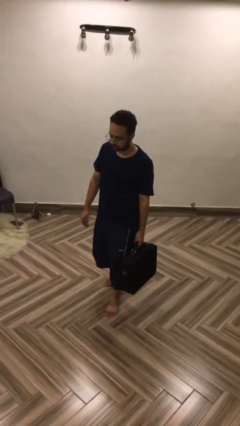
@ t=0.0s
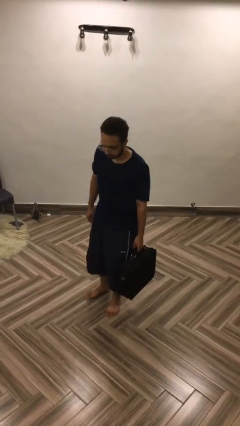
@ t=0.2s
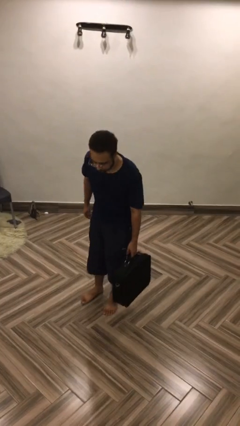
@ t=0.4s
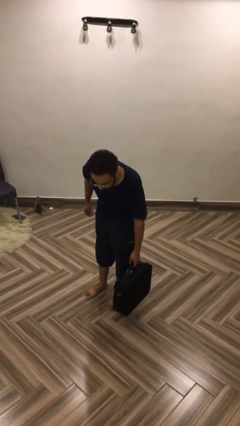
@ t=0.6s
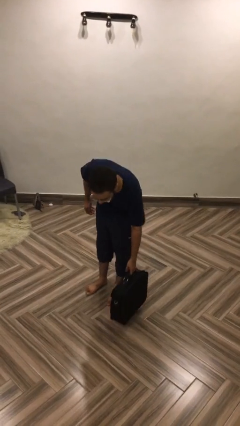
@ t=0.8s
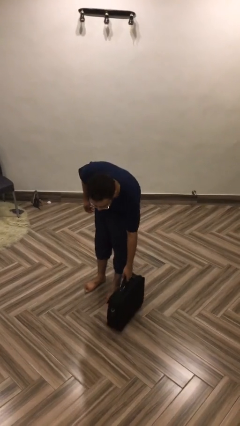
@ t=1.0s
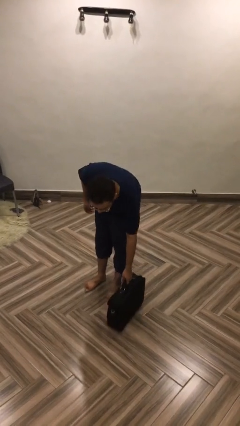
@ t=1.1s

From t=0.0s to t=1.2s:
person puts down object on floor

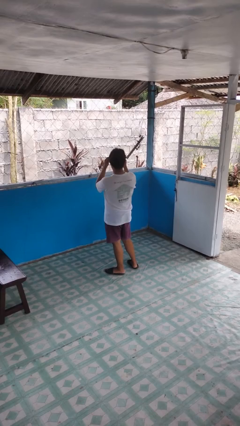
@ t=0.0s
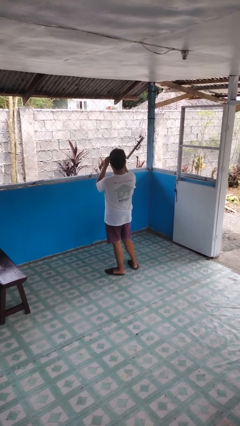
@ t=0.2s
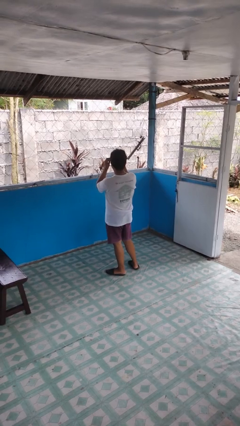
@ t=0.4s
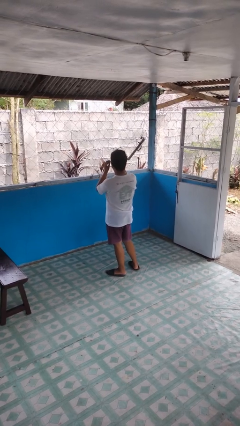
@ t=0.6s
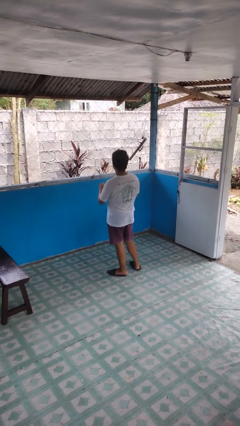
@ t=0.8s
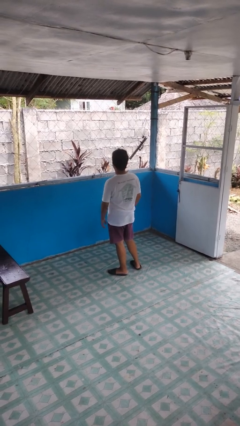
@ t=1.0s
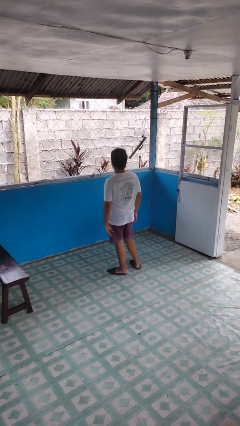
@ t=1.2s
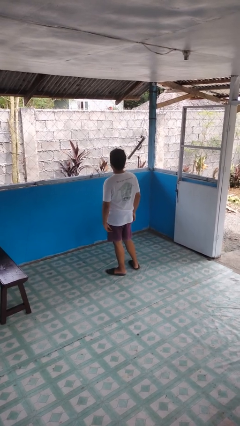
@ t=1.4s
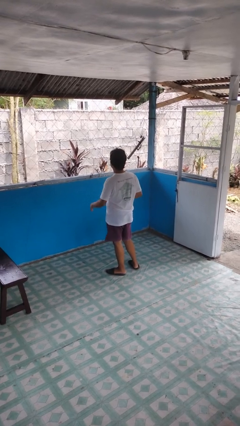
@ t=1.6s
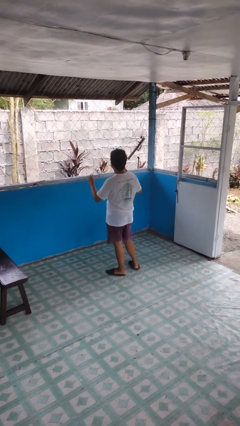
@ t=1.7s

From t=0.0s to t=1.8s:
person puts on sunglasses

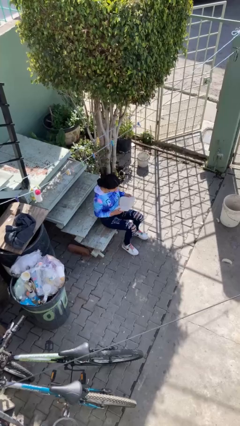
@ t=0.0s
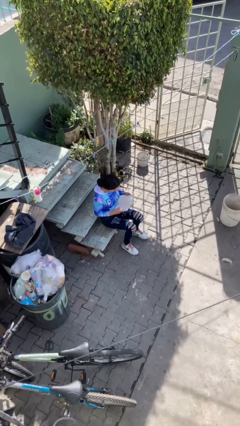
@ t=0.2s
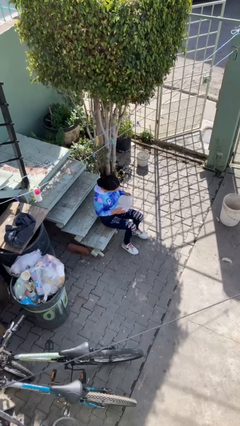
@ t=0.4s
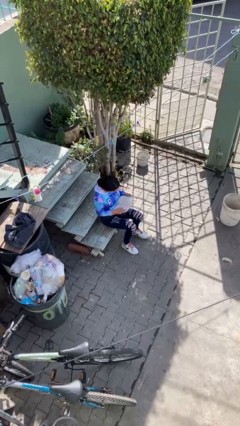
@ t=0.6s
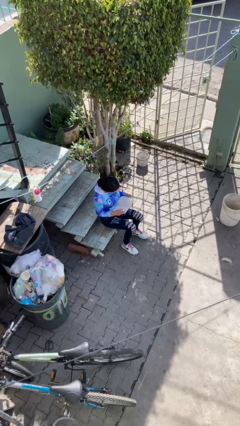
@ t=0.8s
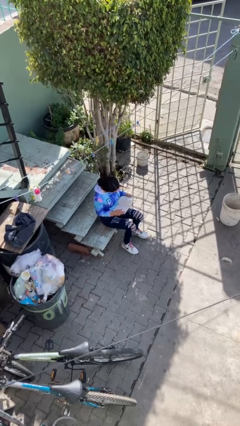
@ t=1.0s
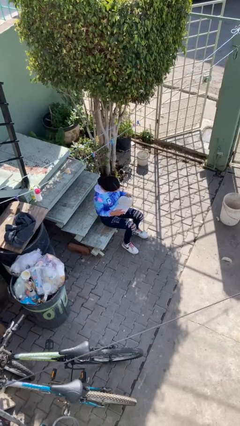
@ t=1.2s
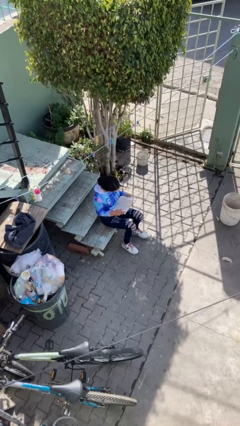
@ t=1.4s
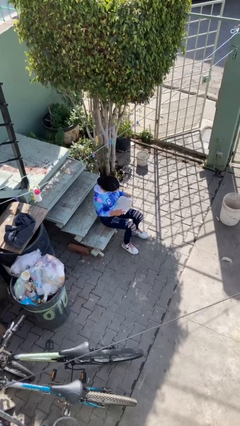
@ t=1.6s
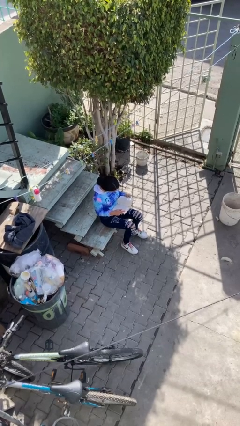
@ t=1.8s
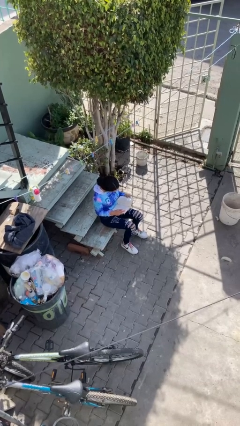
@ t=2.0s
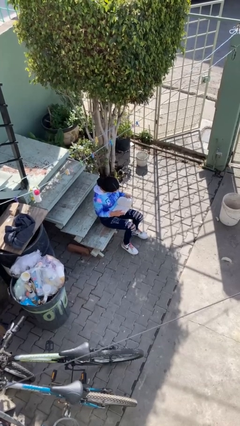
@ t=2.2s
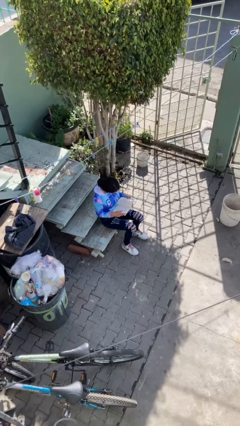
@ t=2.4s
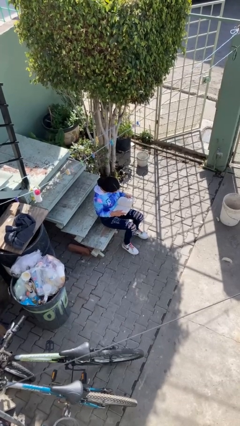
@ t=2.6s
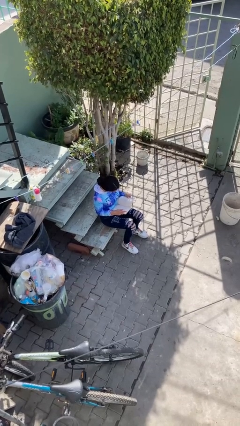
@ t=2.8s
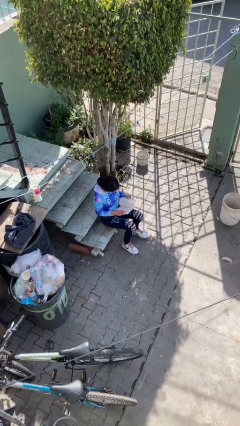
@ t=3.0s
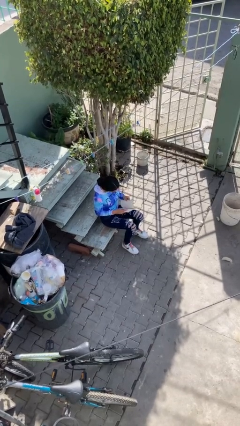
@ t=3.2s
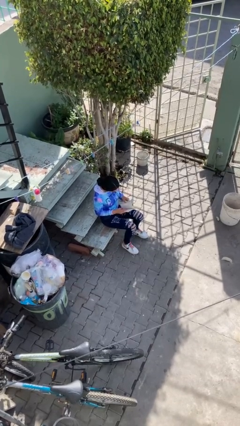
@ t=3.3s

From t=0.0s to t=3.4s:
person reads document

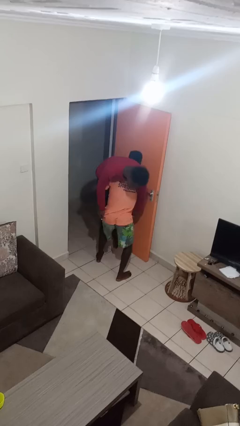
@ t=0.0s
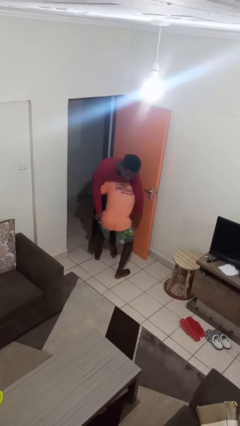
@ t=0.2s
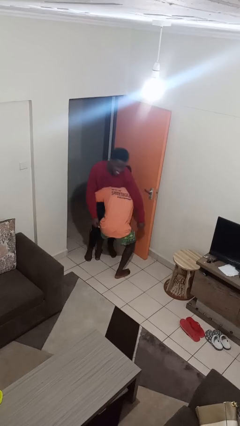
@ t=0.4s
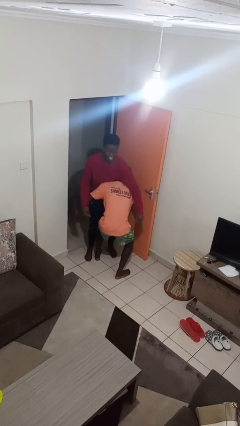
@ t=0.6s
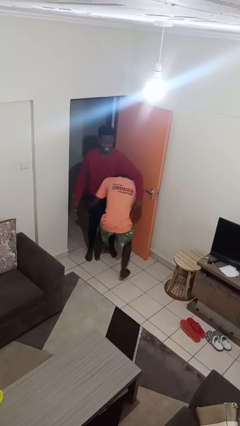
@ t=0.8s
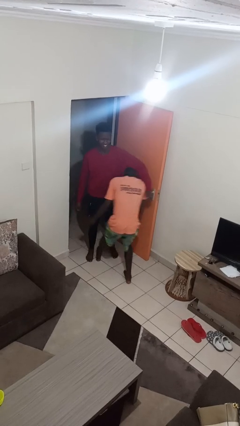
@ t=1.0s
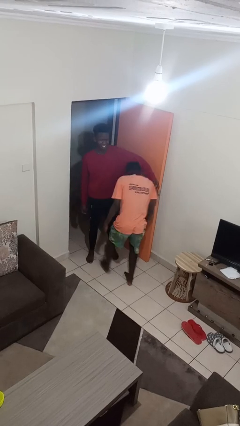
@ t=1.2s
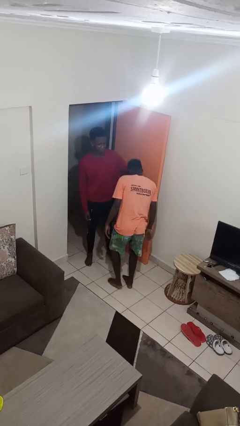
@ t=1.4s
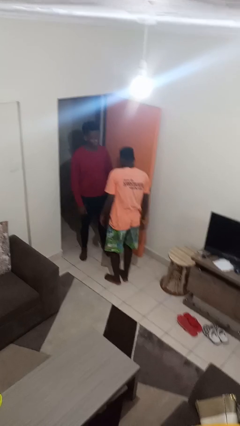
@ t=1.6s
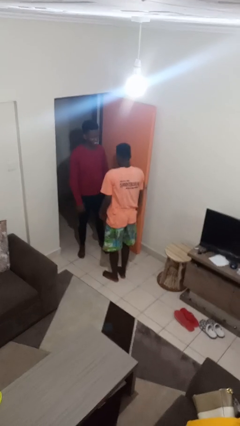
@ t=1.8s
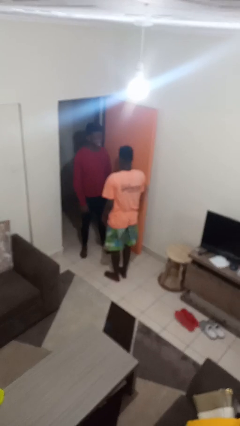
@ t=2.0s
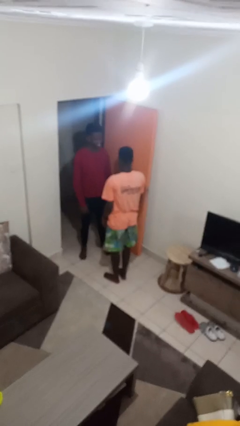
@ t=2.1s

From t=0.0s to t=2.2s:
person puts down person

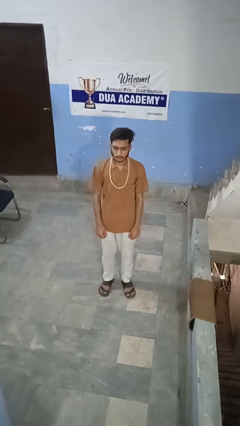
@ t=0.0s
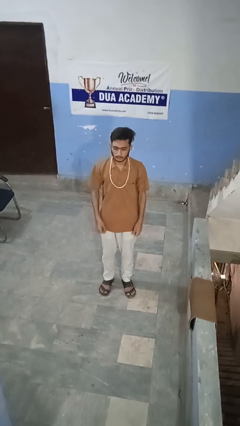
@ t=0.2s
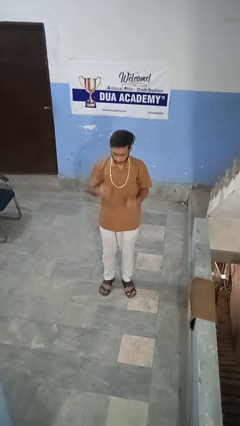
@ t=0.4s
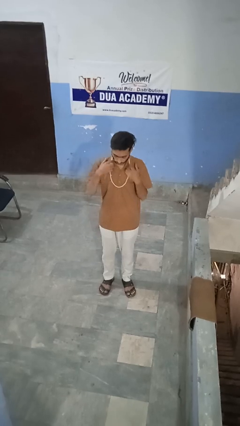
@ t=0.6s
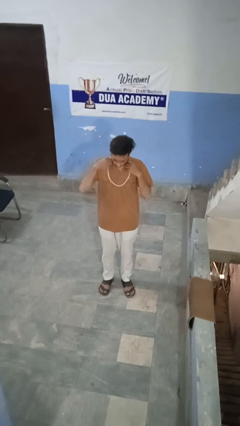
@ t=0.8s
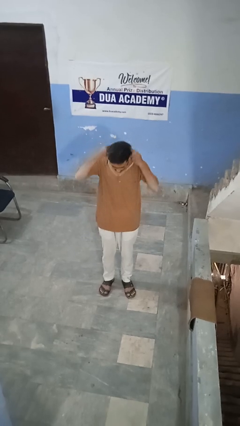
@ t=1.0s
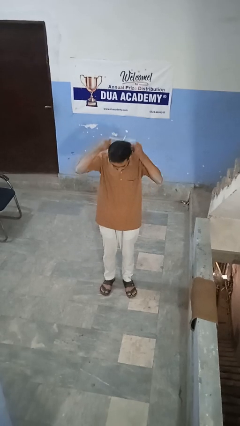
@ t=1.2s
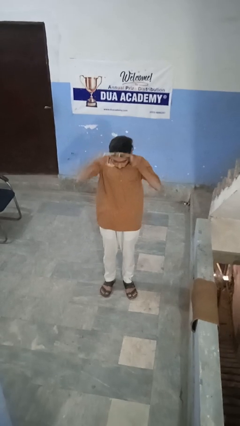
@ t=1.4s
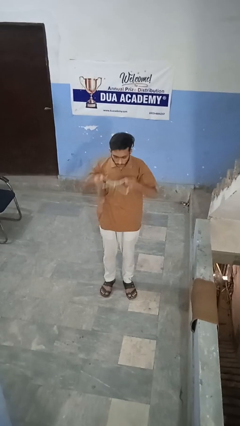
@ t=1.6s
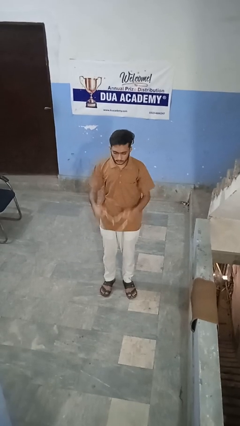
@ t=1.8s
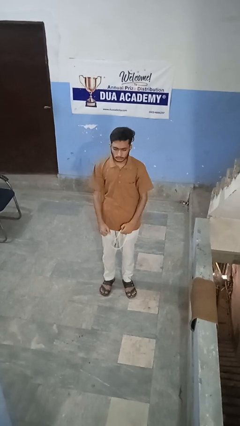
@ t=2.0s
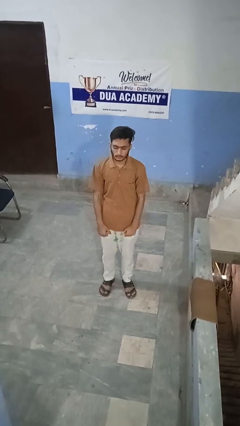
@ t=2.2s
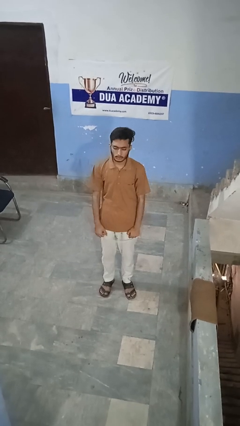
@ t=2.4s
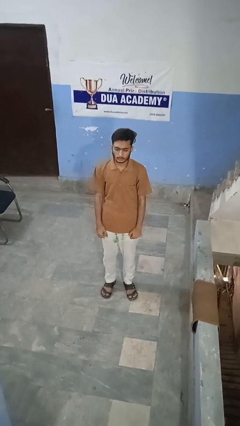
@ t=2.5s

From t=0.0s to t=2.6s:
person takes off necklace

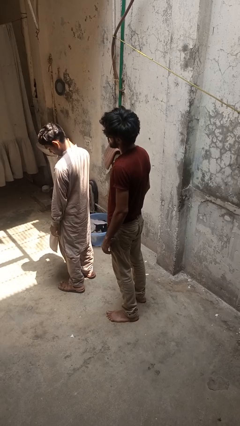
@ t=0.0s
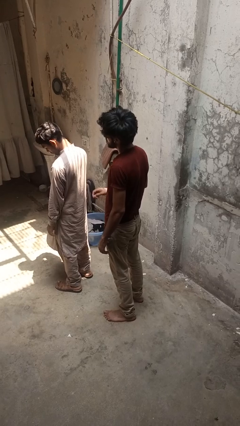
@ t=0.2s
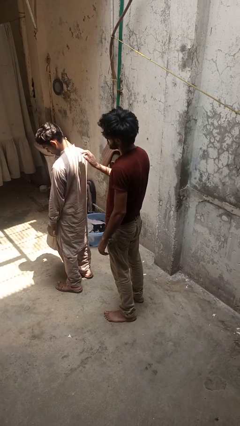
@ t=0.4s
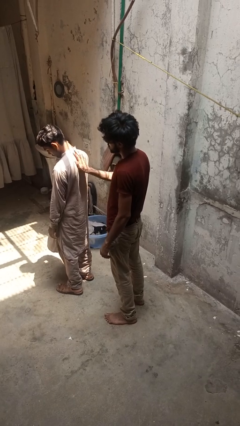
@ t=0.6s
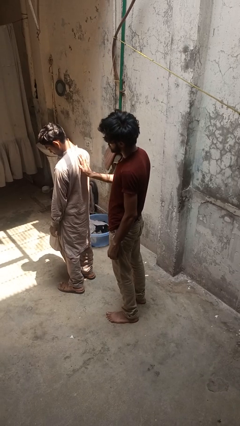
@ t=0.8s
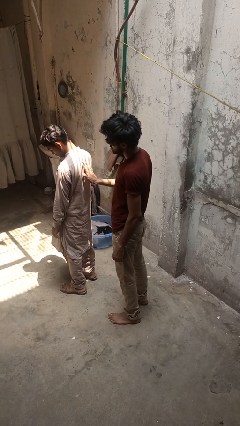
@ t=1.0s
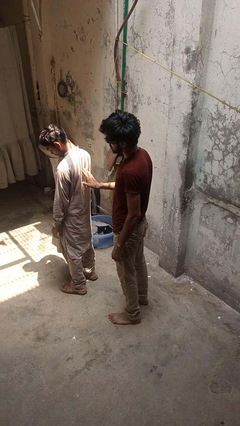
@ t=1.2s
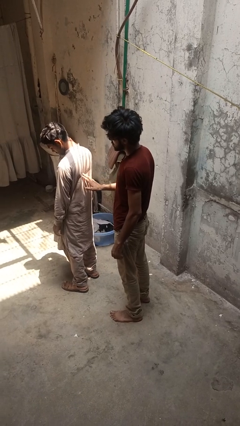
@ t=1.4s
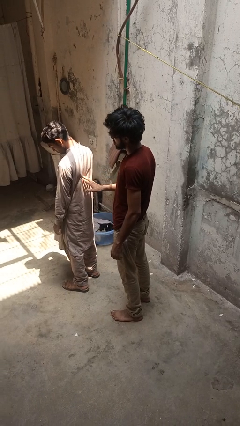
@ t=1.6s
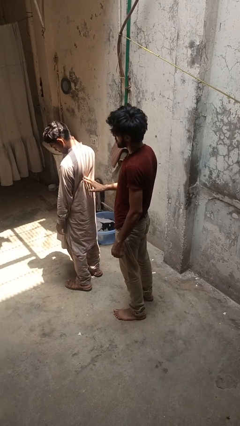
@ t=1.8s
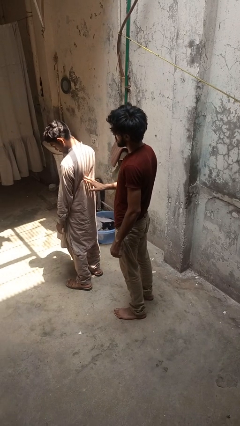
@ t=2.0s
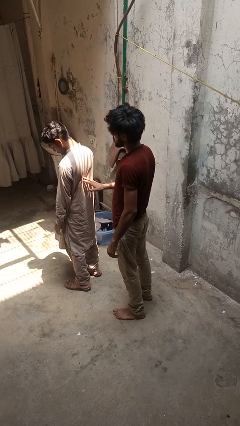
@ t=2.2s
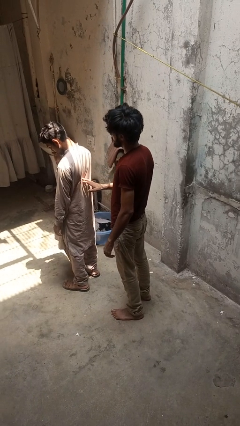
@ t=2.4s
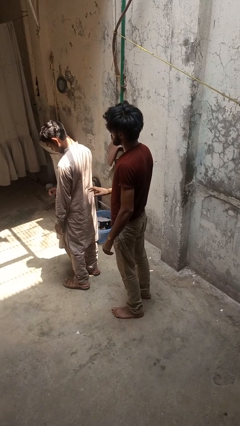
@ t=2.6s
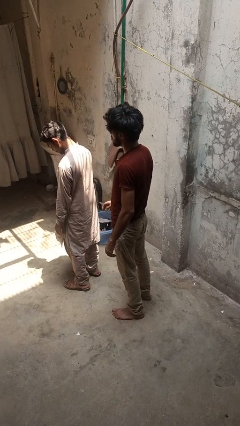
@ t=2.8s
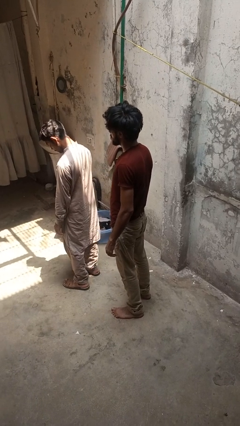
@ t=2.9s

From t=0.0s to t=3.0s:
person touches back of person

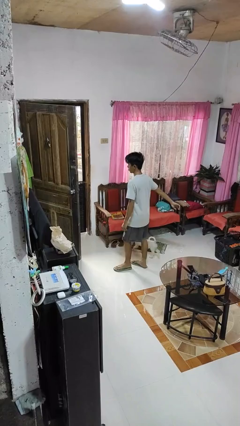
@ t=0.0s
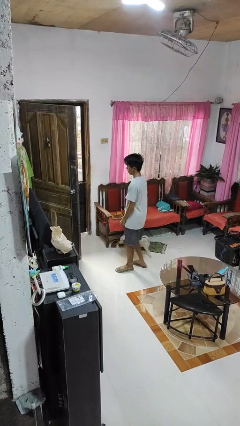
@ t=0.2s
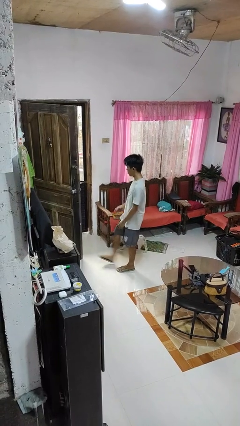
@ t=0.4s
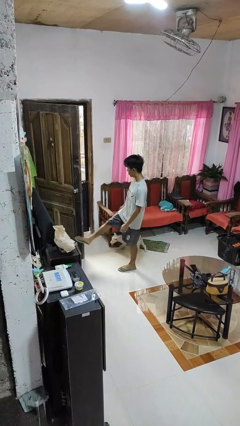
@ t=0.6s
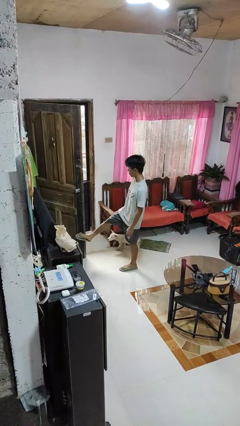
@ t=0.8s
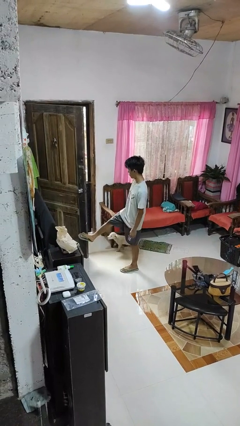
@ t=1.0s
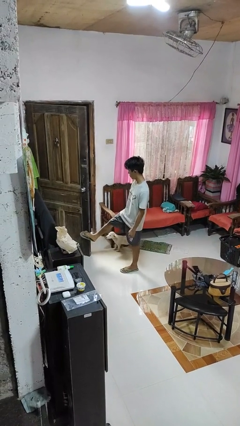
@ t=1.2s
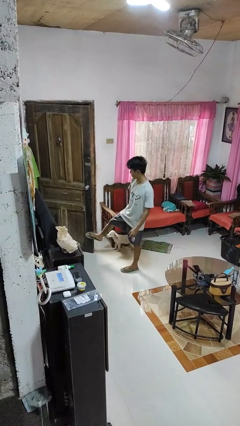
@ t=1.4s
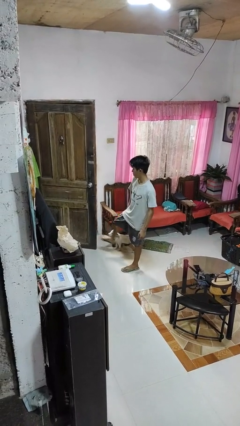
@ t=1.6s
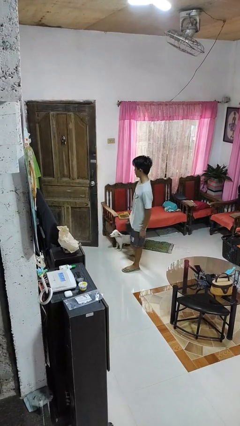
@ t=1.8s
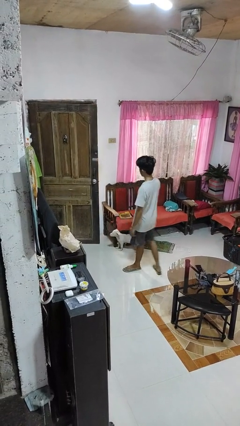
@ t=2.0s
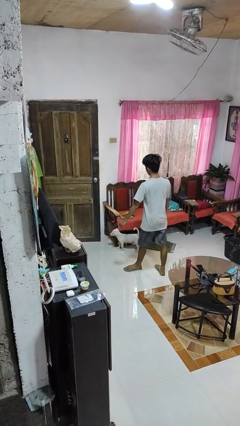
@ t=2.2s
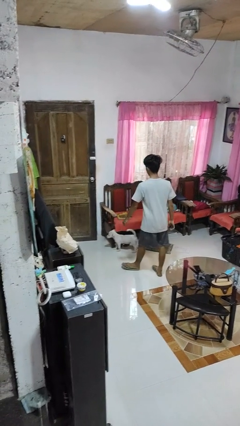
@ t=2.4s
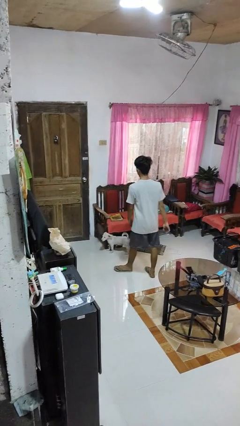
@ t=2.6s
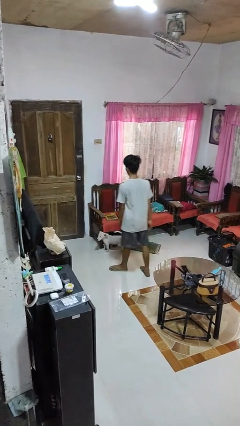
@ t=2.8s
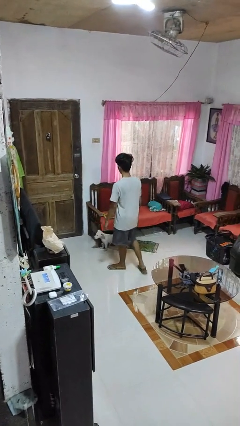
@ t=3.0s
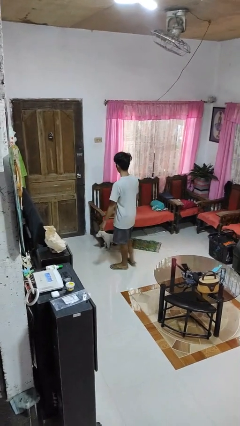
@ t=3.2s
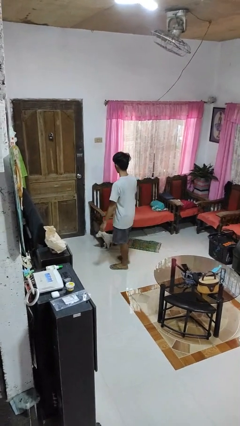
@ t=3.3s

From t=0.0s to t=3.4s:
person closes door with foot
